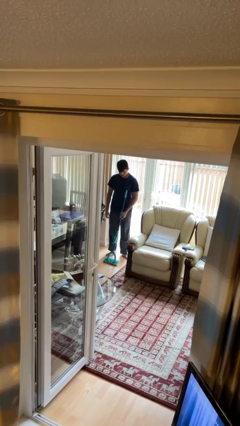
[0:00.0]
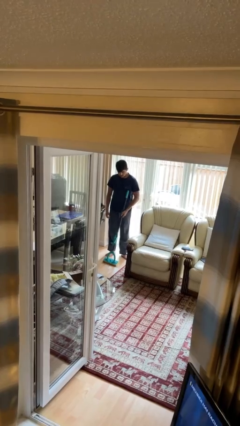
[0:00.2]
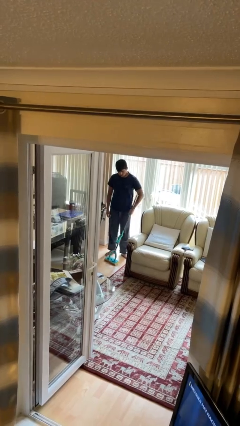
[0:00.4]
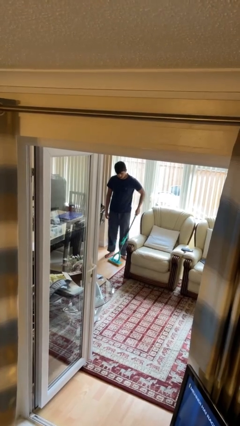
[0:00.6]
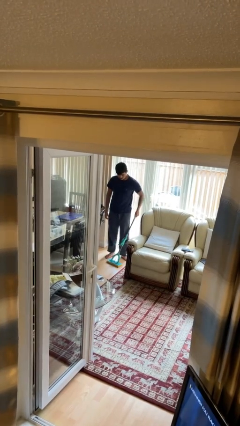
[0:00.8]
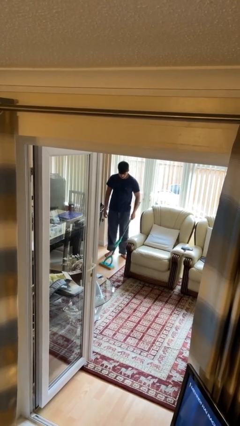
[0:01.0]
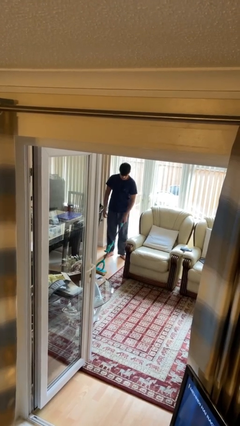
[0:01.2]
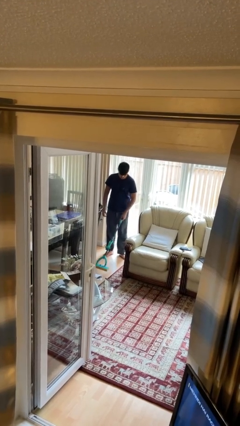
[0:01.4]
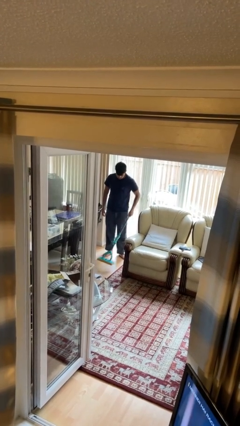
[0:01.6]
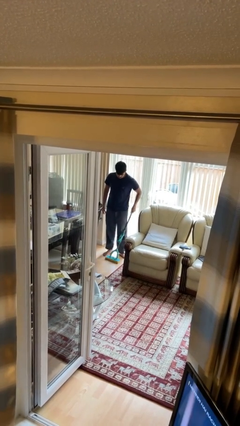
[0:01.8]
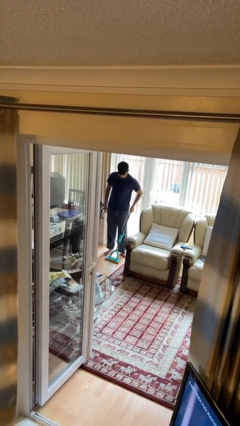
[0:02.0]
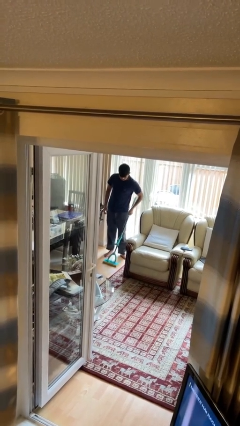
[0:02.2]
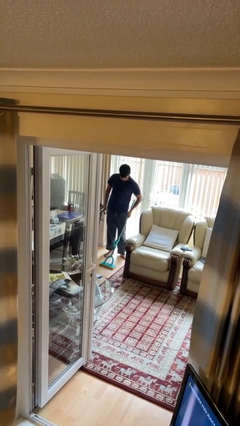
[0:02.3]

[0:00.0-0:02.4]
person mops

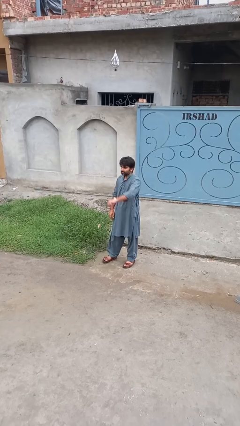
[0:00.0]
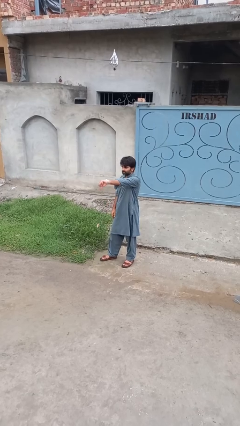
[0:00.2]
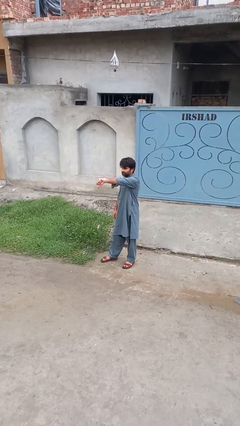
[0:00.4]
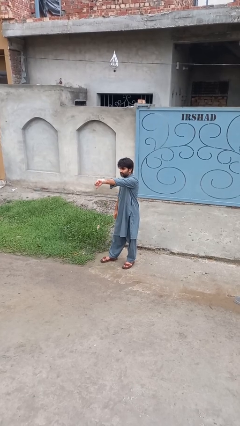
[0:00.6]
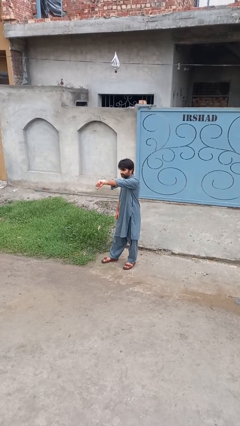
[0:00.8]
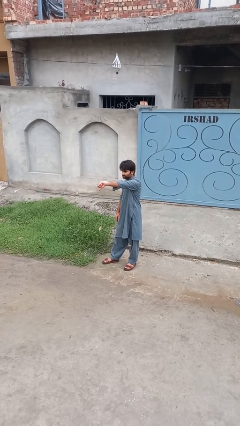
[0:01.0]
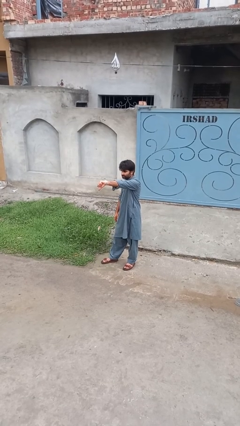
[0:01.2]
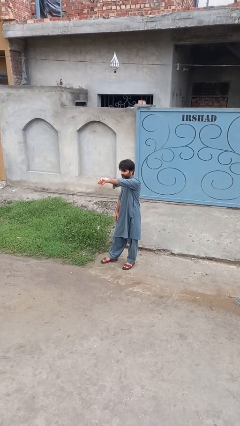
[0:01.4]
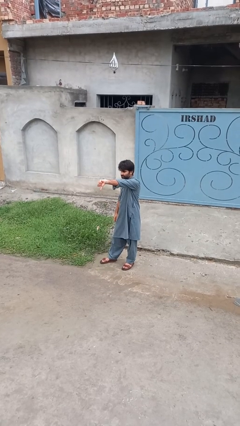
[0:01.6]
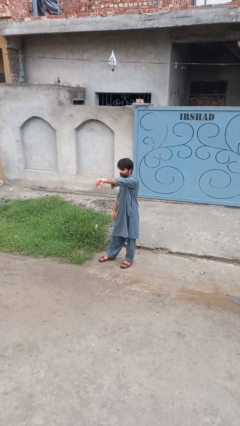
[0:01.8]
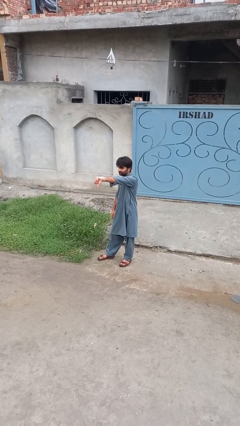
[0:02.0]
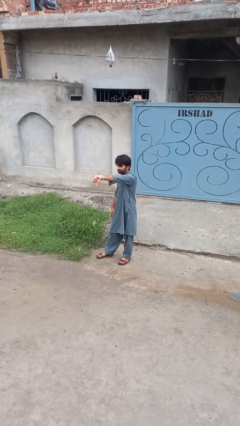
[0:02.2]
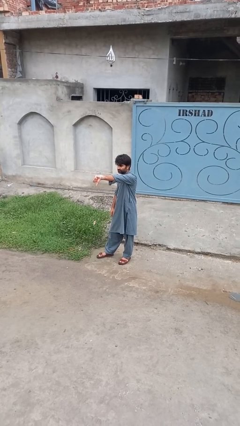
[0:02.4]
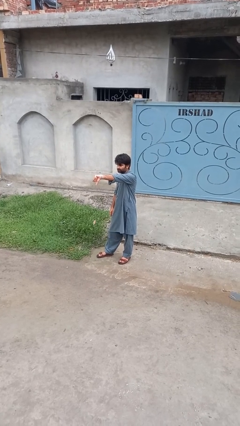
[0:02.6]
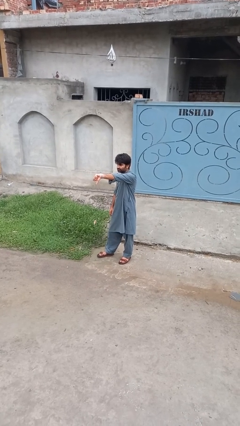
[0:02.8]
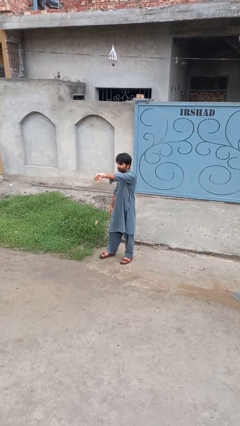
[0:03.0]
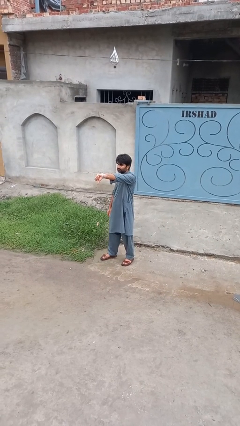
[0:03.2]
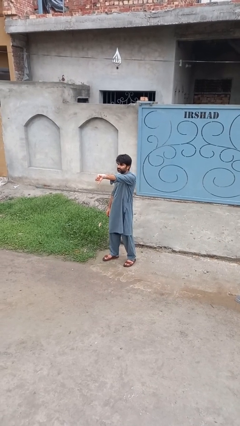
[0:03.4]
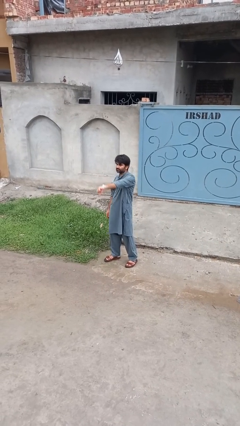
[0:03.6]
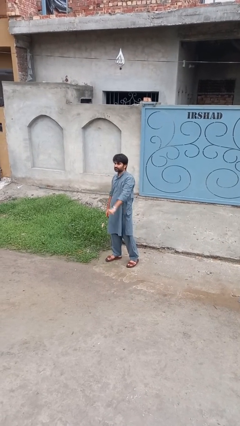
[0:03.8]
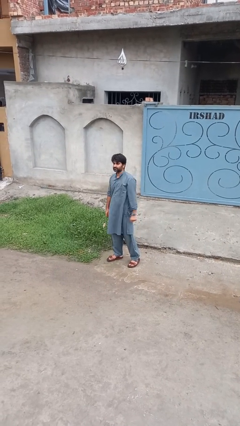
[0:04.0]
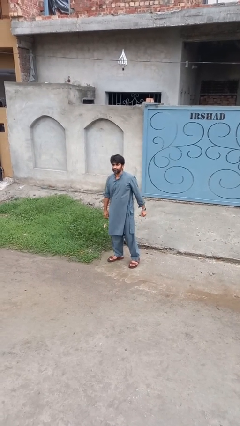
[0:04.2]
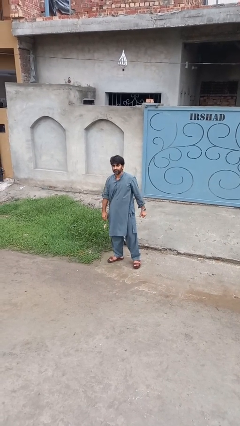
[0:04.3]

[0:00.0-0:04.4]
person gestures thumbs down

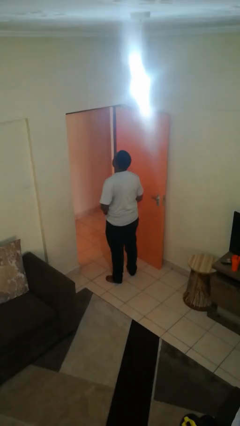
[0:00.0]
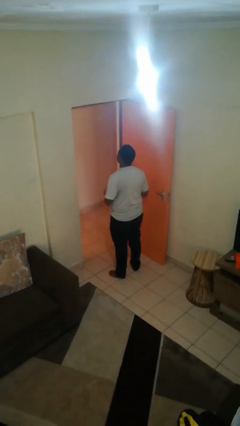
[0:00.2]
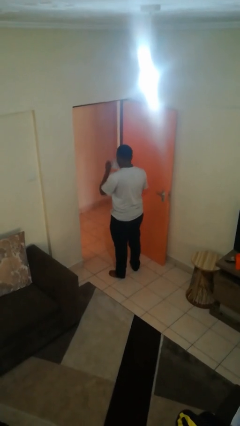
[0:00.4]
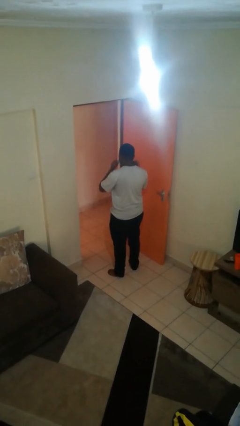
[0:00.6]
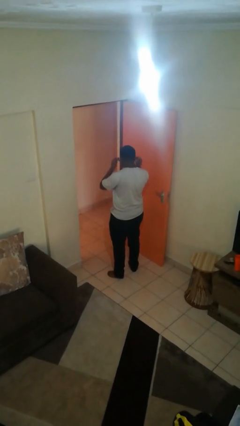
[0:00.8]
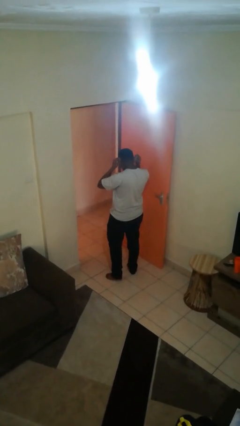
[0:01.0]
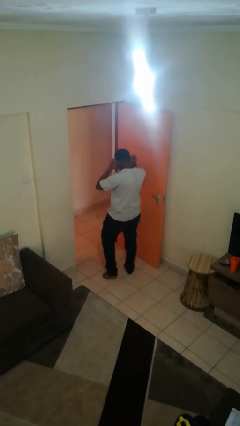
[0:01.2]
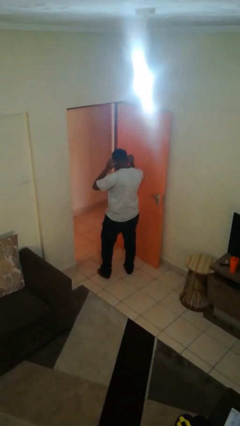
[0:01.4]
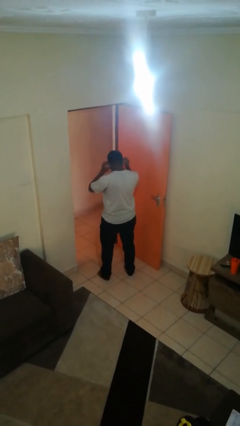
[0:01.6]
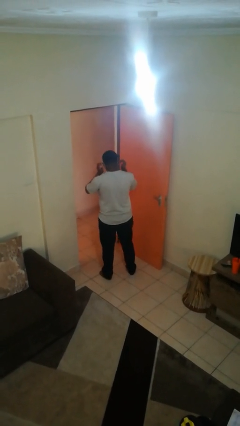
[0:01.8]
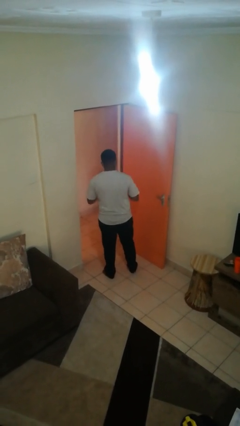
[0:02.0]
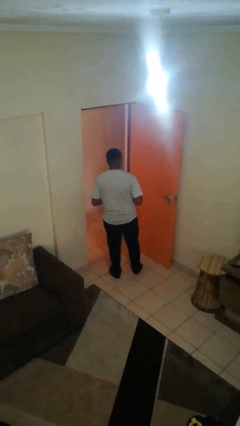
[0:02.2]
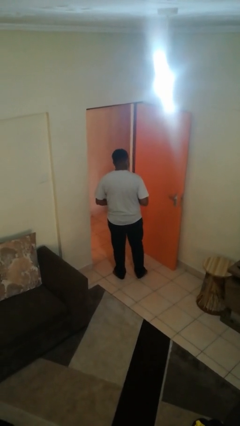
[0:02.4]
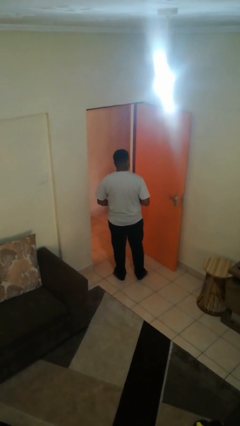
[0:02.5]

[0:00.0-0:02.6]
person puts on facemask

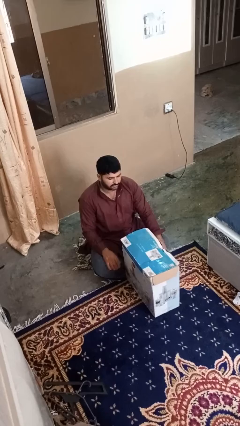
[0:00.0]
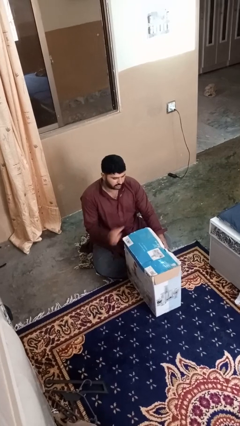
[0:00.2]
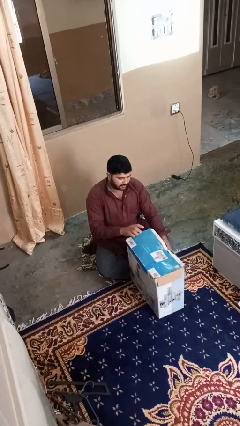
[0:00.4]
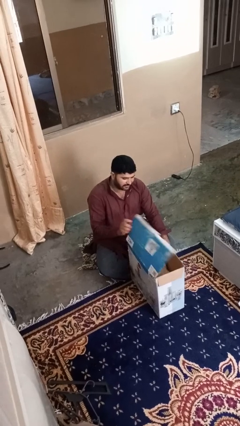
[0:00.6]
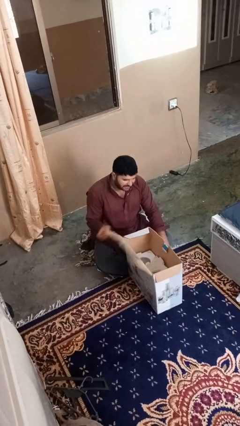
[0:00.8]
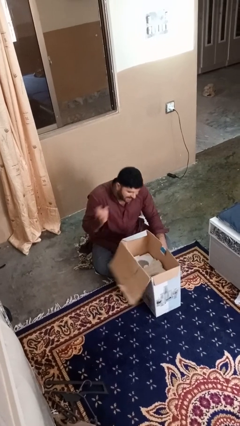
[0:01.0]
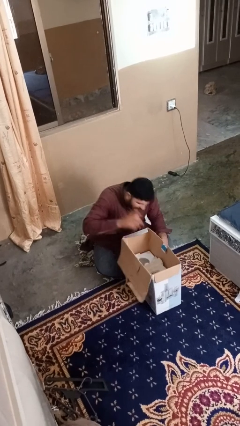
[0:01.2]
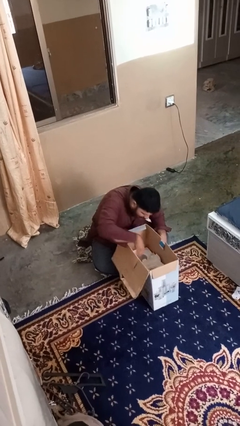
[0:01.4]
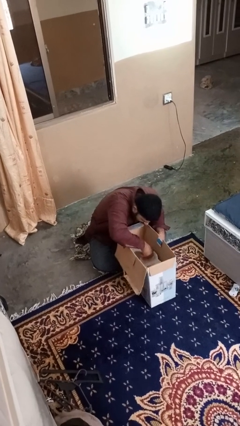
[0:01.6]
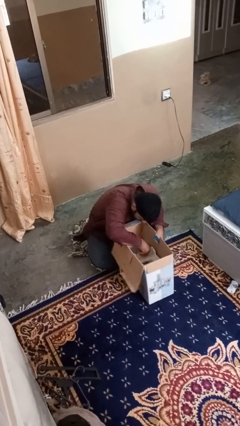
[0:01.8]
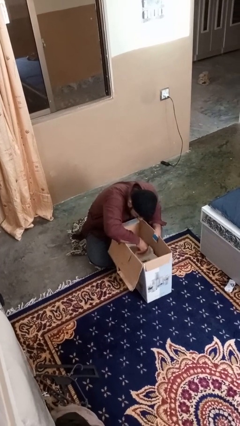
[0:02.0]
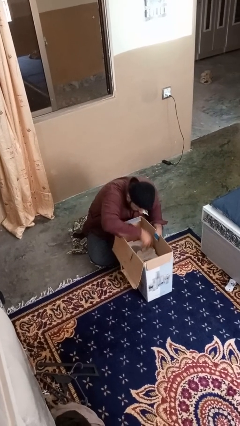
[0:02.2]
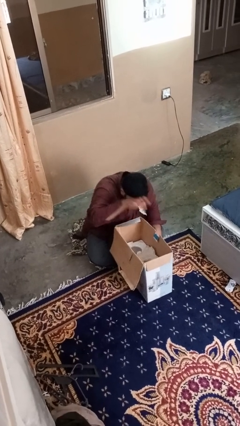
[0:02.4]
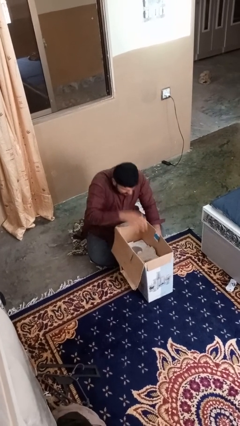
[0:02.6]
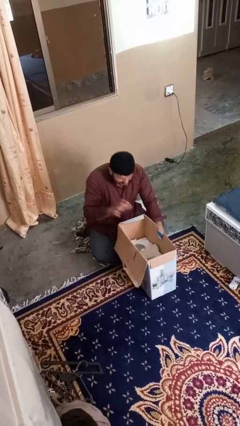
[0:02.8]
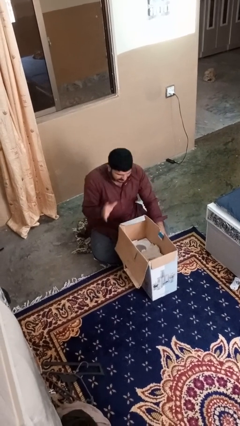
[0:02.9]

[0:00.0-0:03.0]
person searches in box

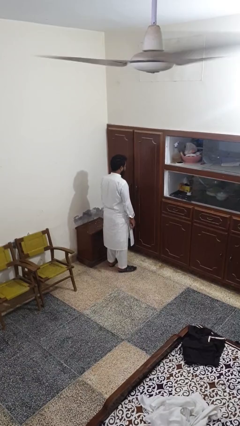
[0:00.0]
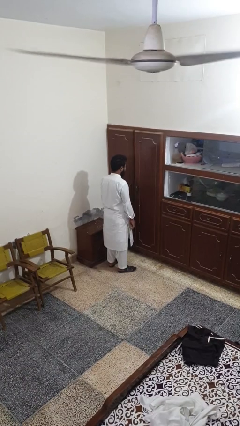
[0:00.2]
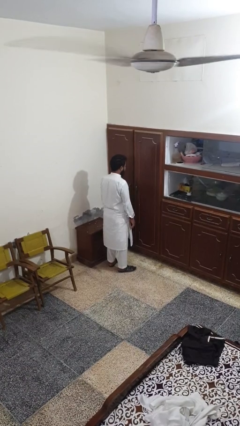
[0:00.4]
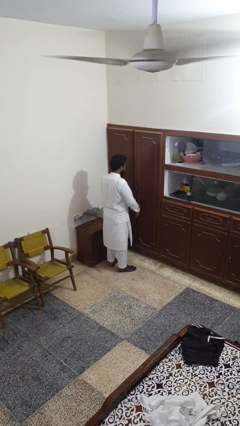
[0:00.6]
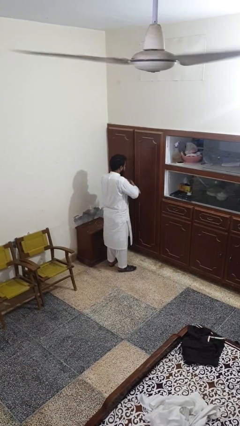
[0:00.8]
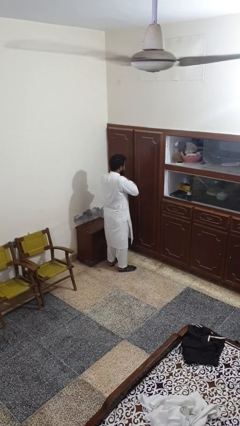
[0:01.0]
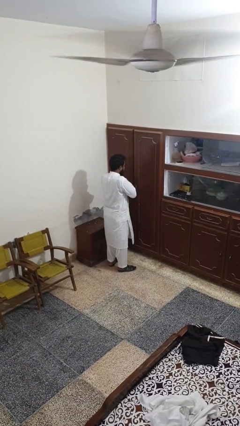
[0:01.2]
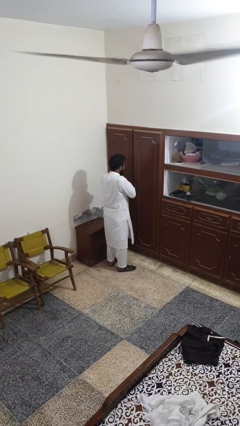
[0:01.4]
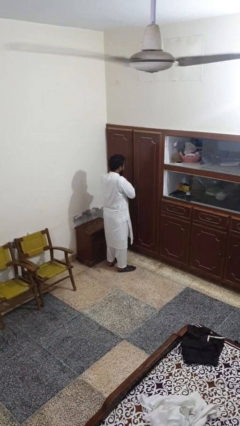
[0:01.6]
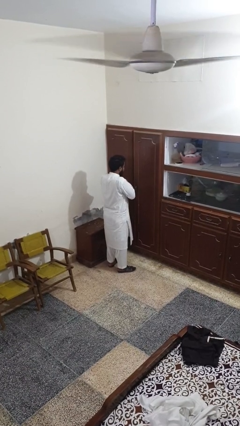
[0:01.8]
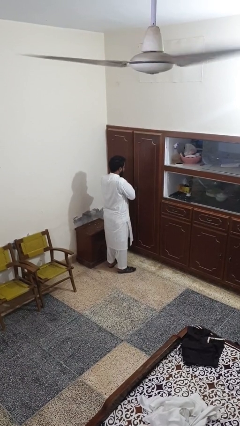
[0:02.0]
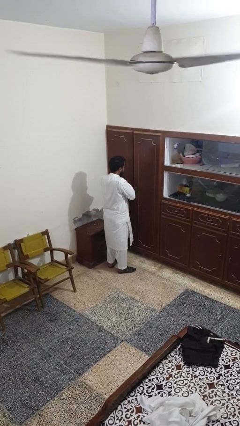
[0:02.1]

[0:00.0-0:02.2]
person prays

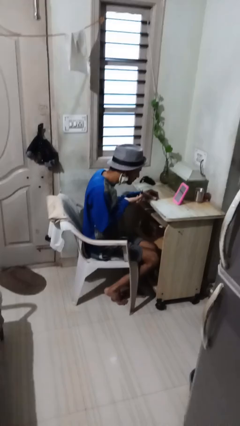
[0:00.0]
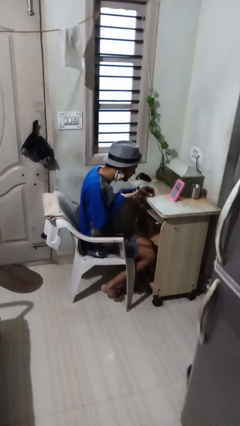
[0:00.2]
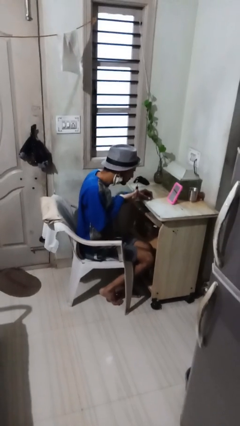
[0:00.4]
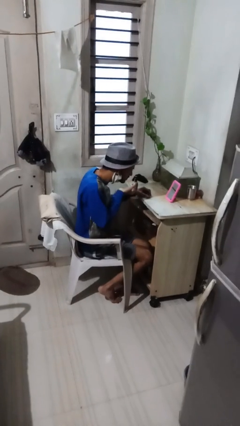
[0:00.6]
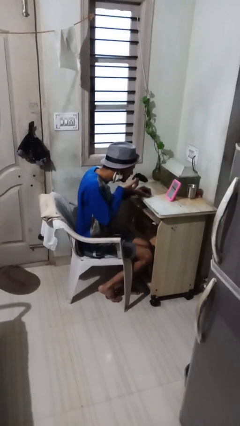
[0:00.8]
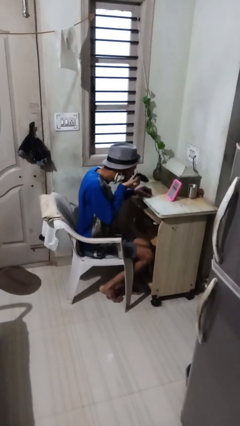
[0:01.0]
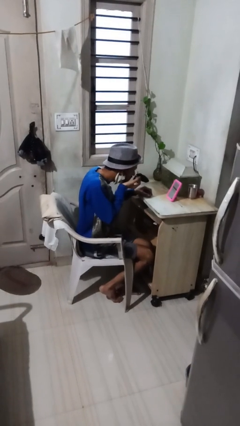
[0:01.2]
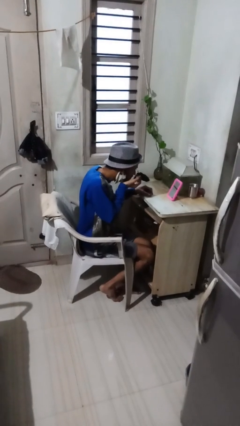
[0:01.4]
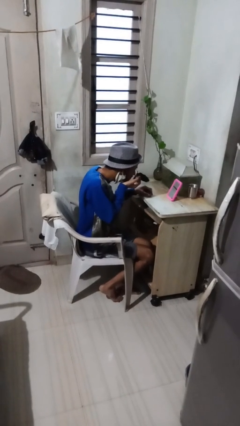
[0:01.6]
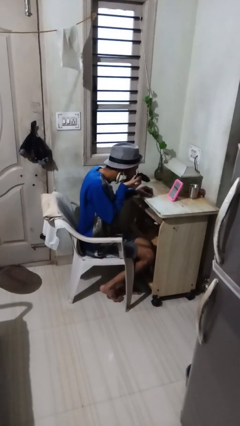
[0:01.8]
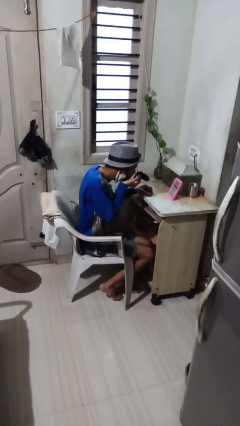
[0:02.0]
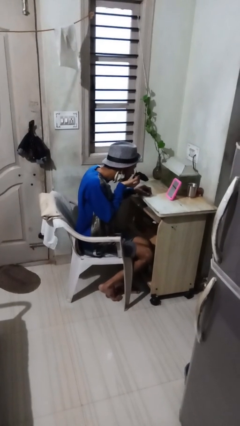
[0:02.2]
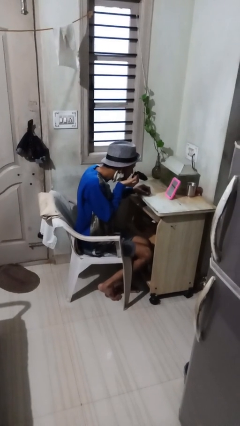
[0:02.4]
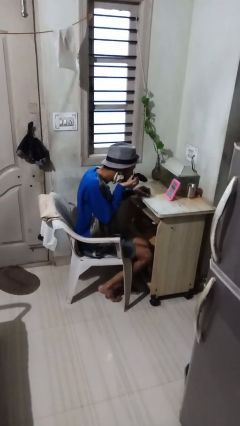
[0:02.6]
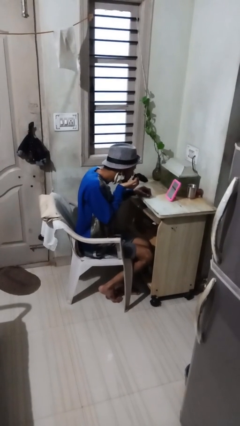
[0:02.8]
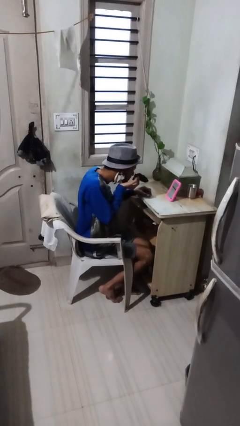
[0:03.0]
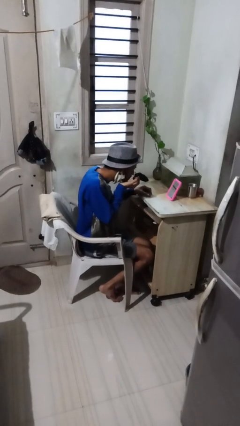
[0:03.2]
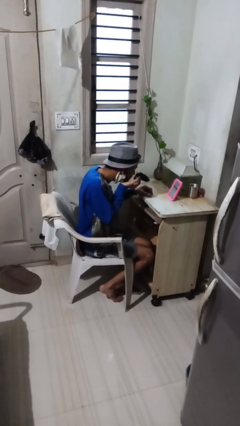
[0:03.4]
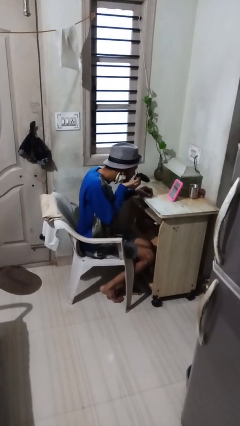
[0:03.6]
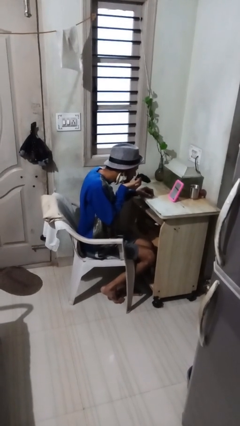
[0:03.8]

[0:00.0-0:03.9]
person applies eye makeup
